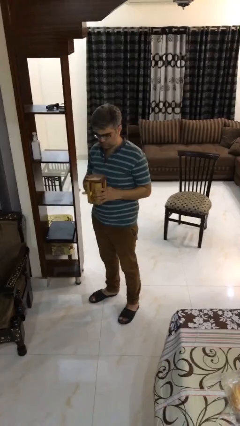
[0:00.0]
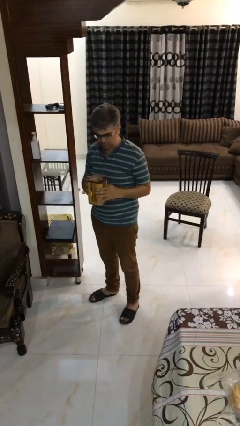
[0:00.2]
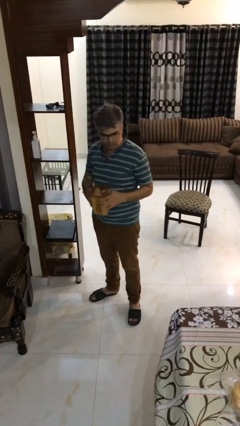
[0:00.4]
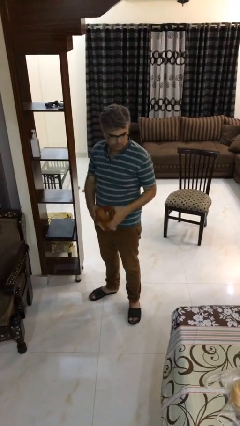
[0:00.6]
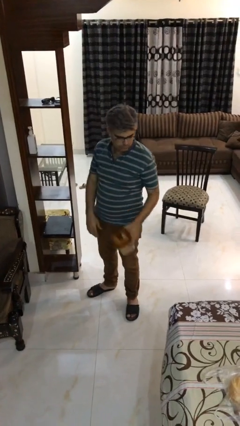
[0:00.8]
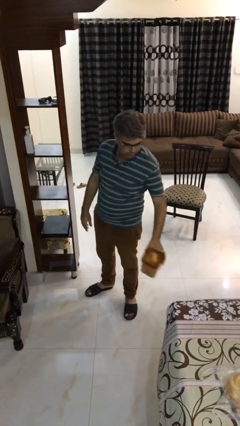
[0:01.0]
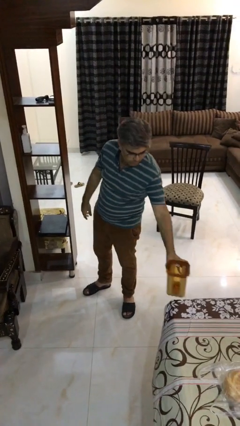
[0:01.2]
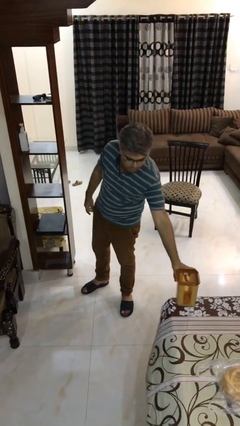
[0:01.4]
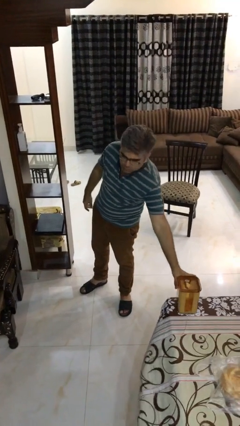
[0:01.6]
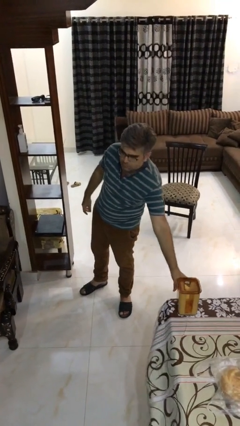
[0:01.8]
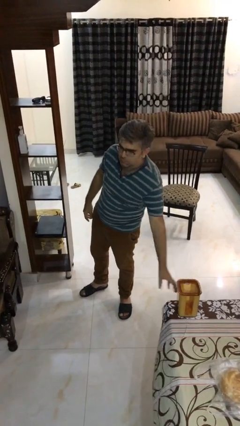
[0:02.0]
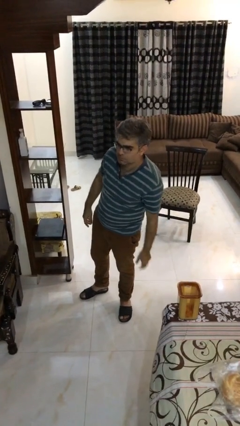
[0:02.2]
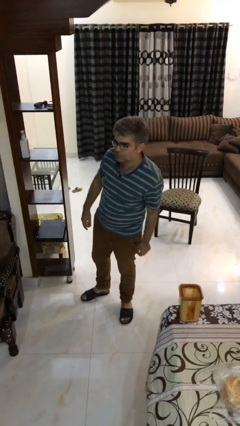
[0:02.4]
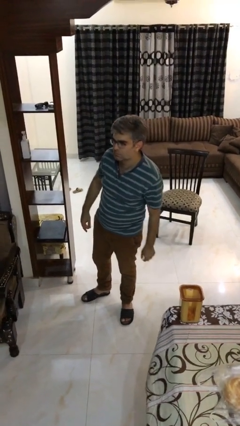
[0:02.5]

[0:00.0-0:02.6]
person puts down object on table

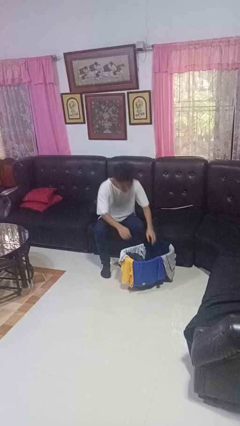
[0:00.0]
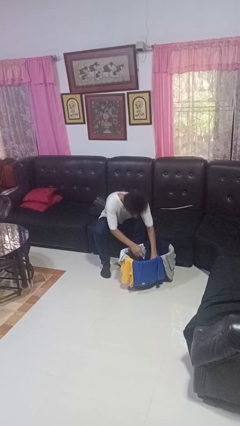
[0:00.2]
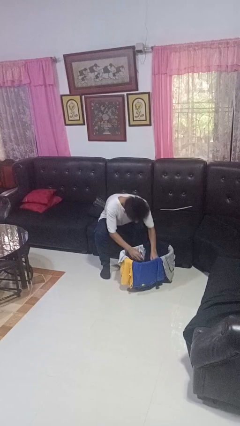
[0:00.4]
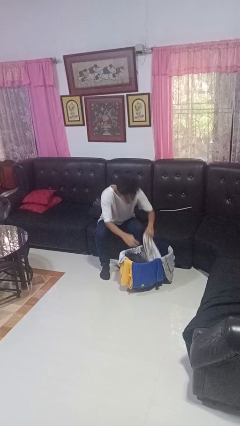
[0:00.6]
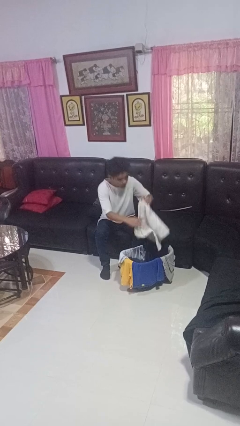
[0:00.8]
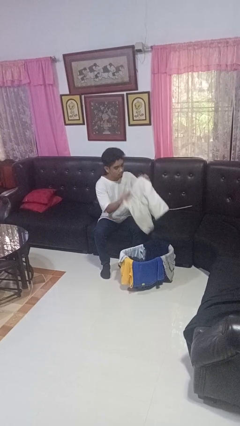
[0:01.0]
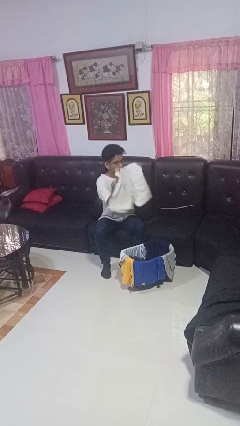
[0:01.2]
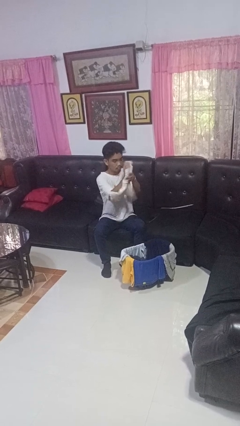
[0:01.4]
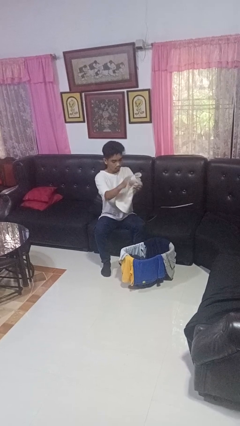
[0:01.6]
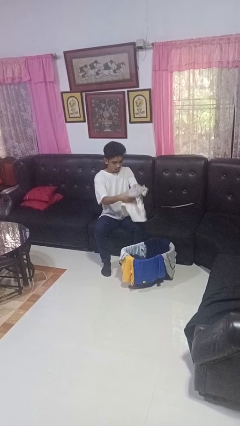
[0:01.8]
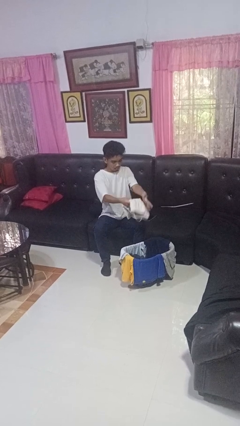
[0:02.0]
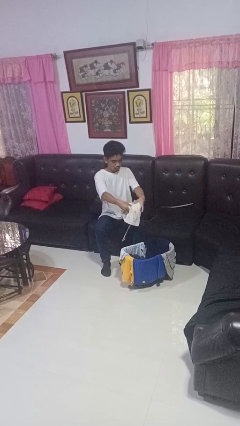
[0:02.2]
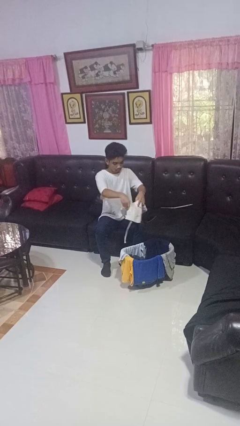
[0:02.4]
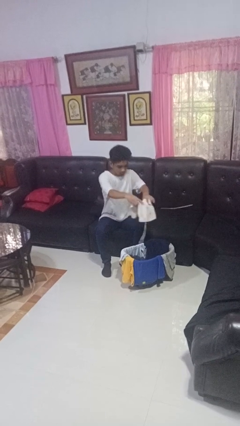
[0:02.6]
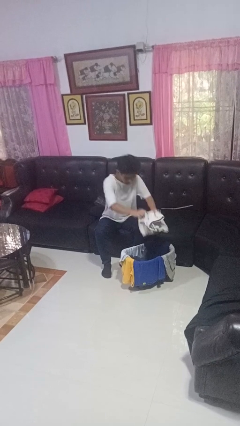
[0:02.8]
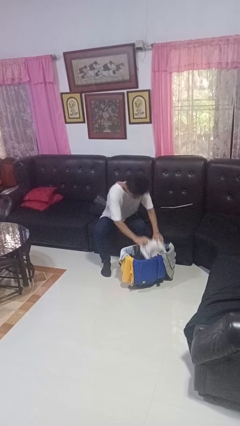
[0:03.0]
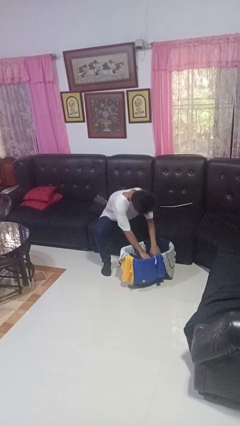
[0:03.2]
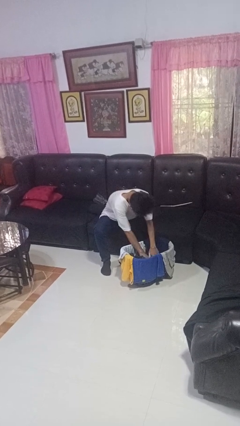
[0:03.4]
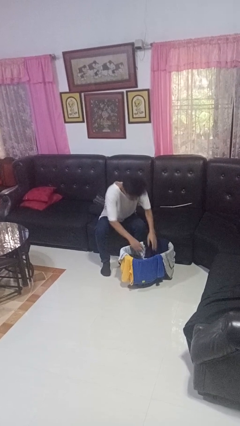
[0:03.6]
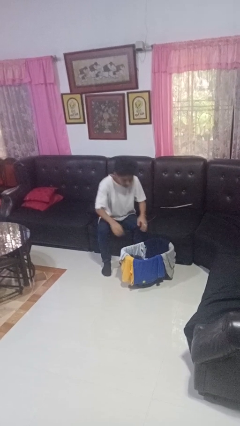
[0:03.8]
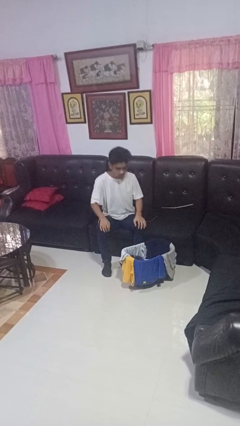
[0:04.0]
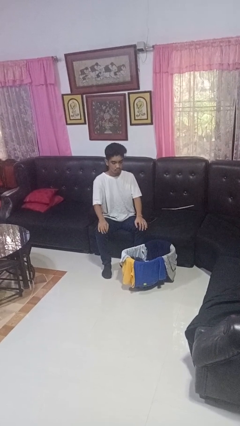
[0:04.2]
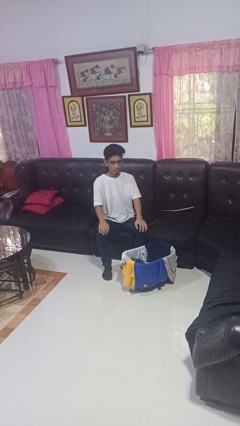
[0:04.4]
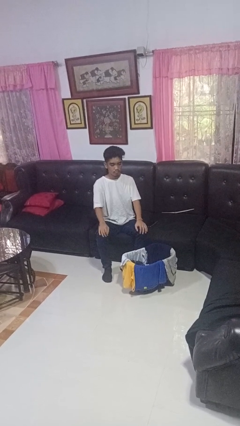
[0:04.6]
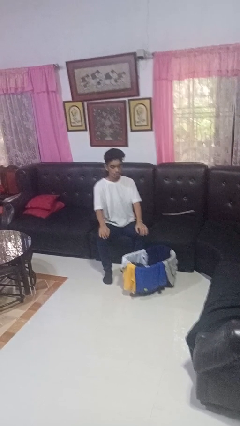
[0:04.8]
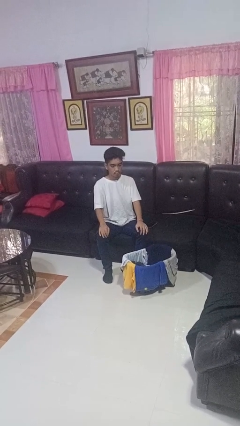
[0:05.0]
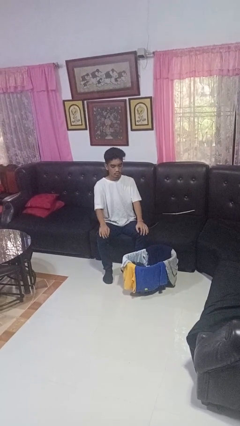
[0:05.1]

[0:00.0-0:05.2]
person folds pants

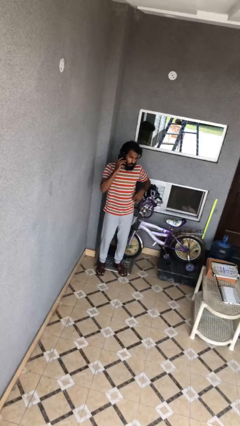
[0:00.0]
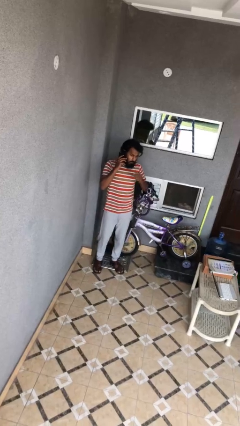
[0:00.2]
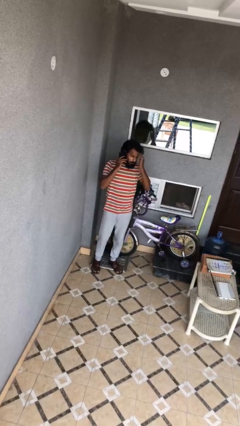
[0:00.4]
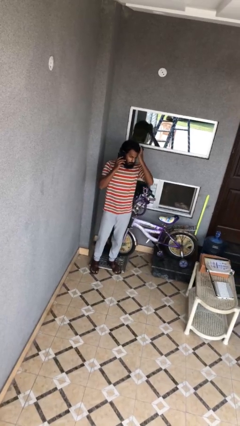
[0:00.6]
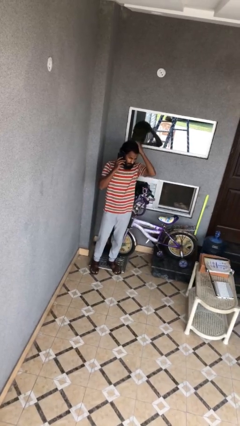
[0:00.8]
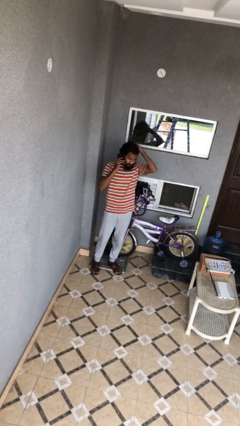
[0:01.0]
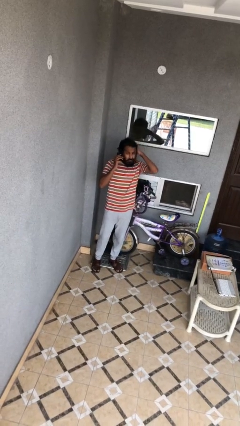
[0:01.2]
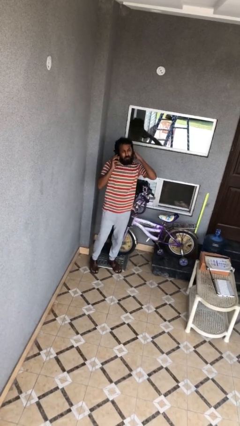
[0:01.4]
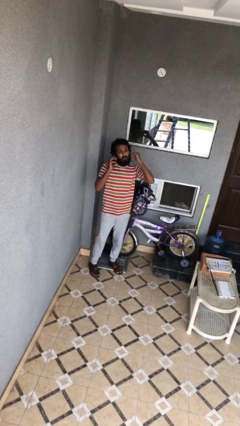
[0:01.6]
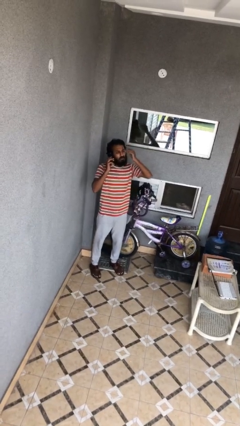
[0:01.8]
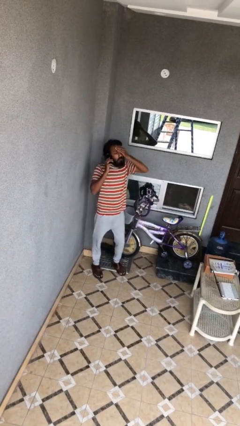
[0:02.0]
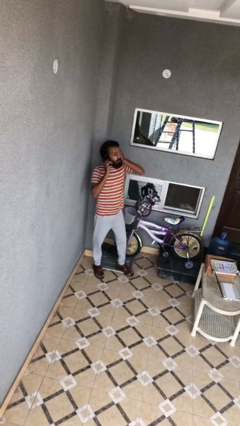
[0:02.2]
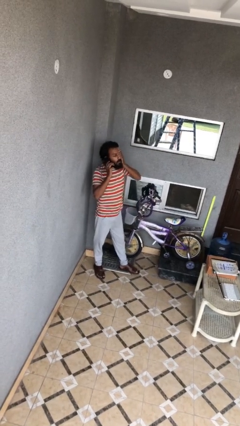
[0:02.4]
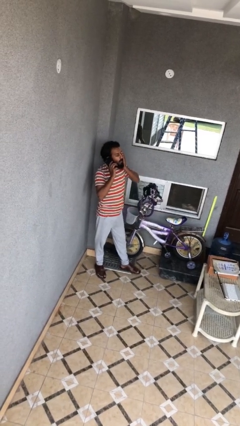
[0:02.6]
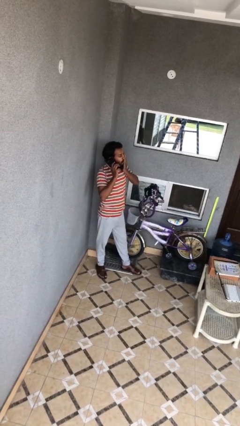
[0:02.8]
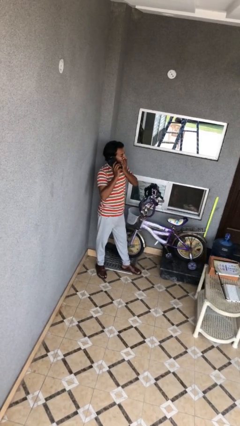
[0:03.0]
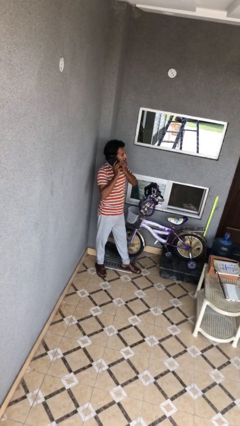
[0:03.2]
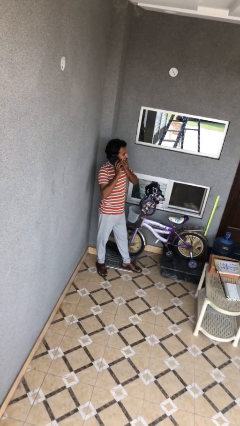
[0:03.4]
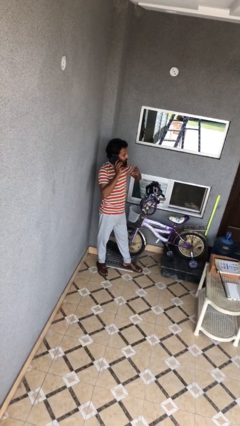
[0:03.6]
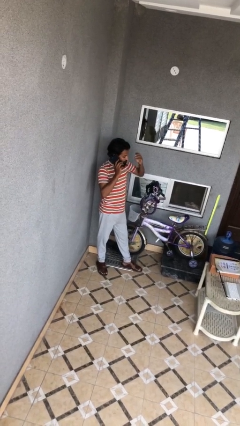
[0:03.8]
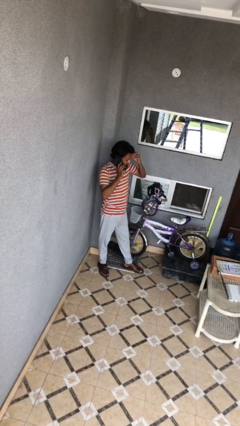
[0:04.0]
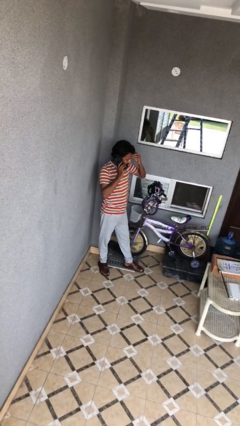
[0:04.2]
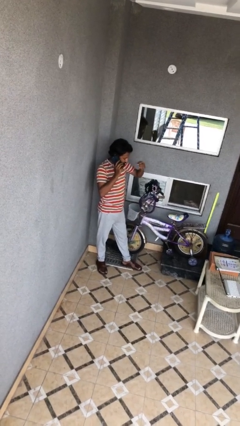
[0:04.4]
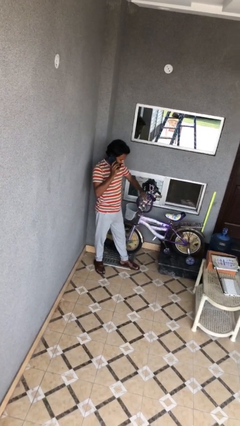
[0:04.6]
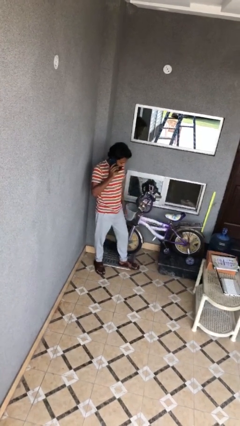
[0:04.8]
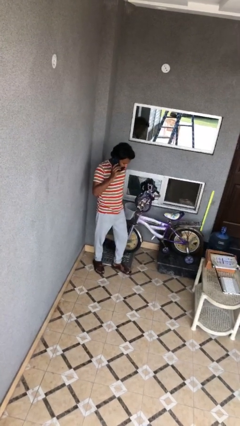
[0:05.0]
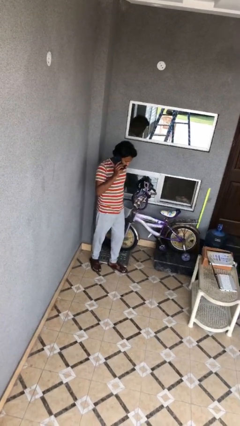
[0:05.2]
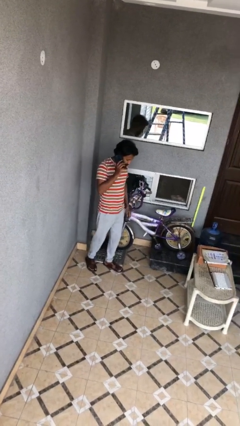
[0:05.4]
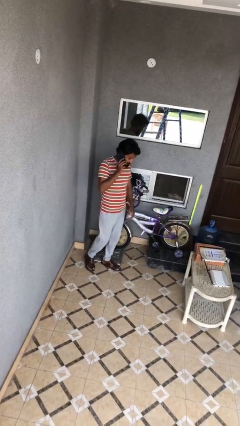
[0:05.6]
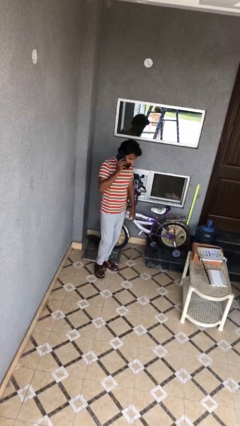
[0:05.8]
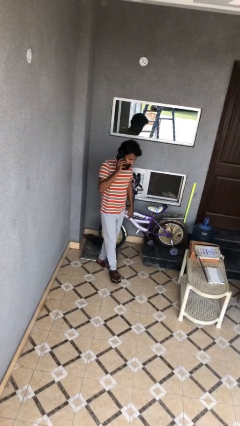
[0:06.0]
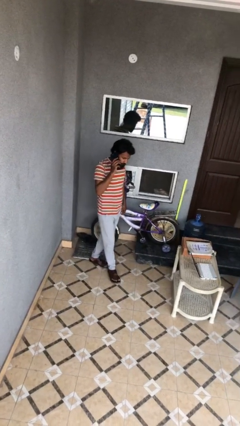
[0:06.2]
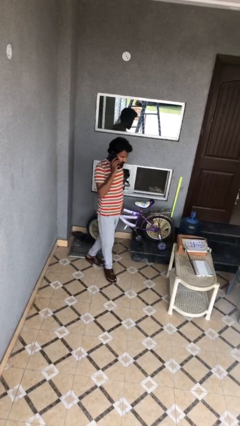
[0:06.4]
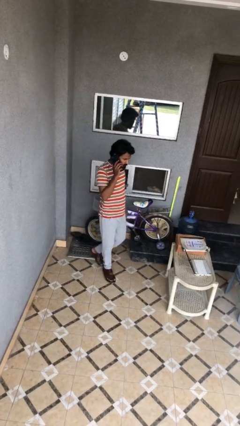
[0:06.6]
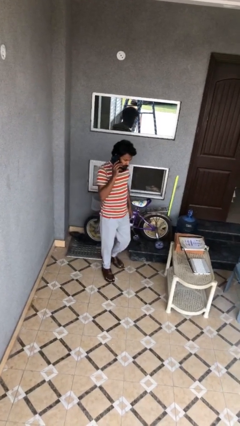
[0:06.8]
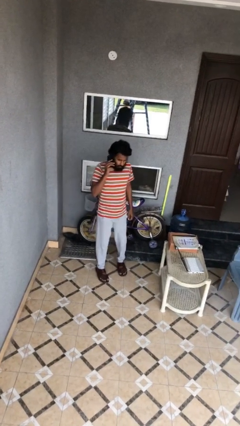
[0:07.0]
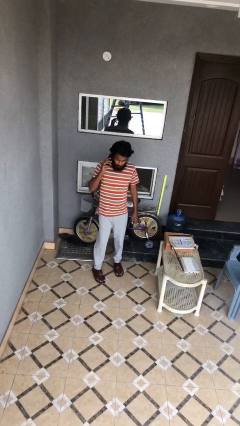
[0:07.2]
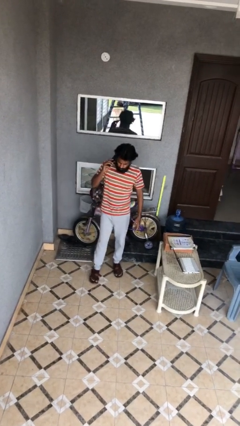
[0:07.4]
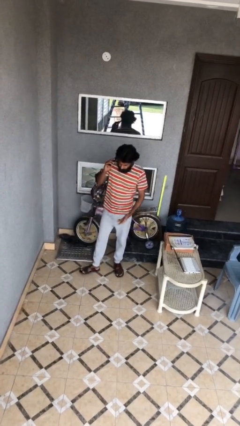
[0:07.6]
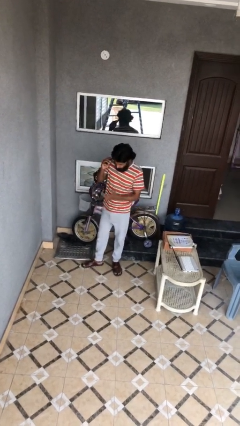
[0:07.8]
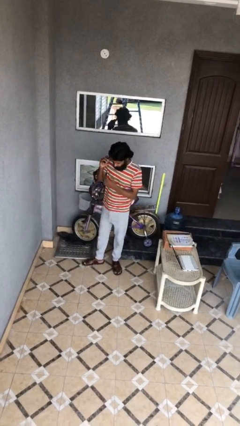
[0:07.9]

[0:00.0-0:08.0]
person talks on phone

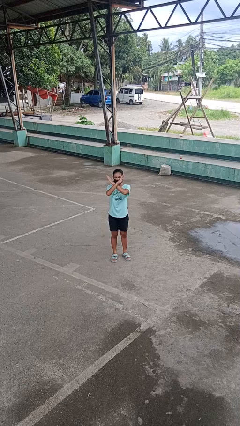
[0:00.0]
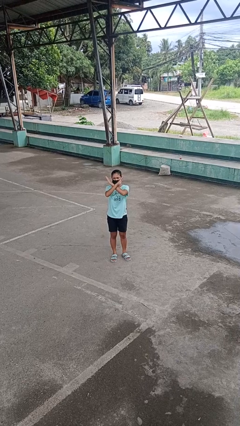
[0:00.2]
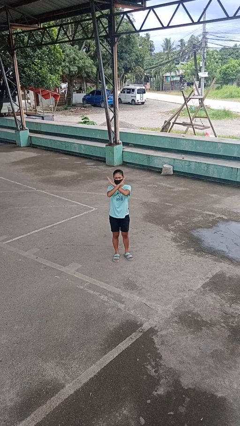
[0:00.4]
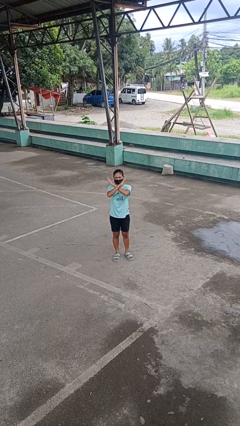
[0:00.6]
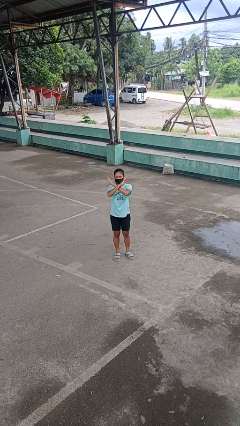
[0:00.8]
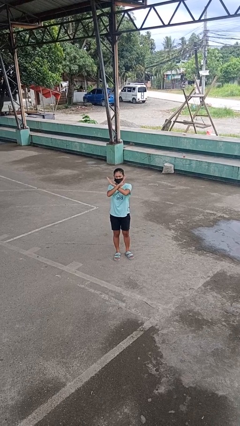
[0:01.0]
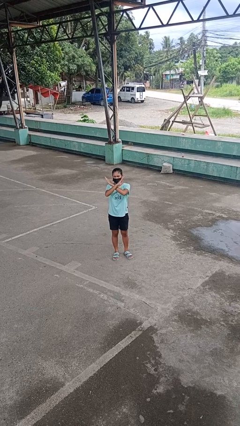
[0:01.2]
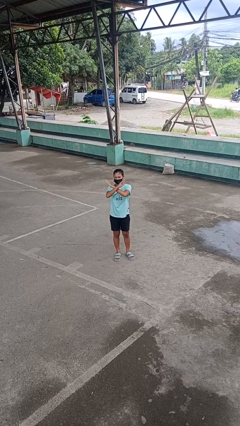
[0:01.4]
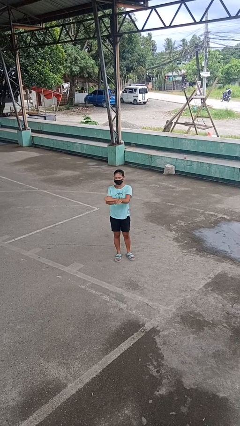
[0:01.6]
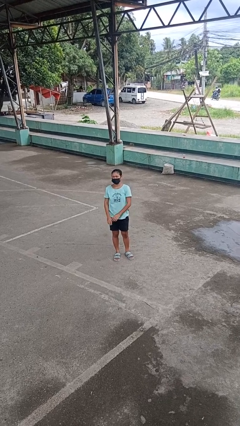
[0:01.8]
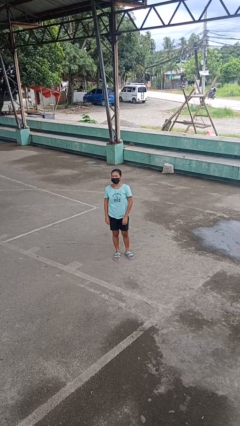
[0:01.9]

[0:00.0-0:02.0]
person gestures arms x
